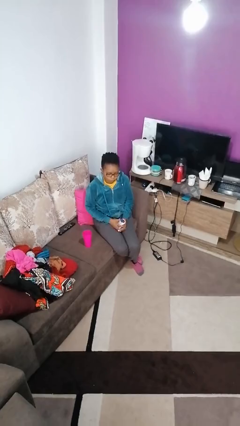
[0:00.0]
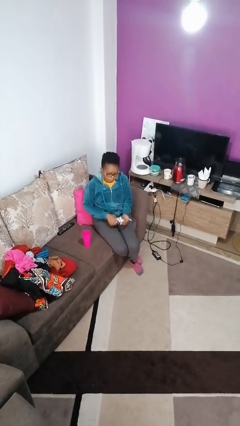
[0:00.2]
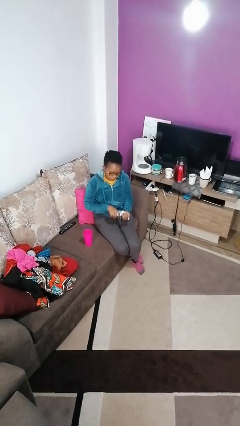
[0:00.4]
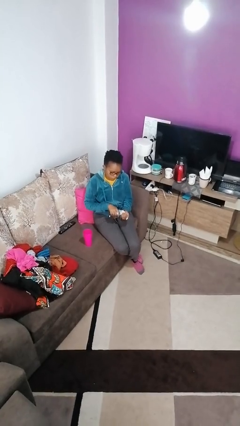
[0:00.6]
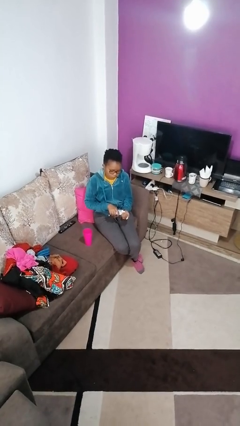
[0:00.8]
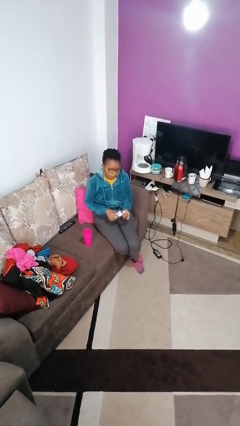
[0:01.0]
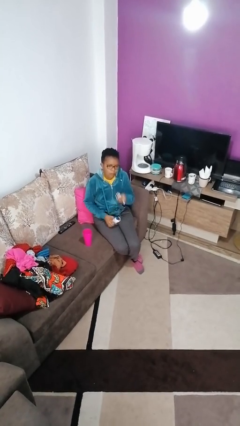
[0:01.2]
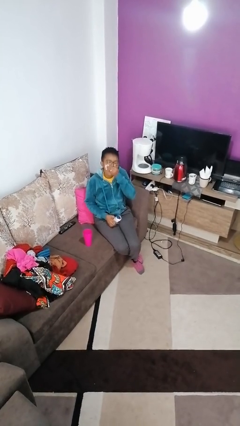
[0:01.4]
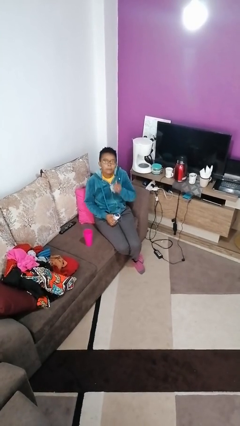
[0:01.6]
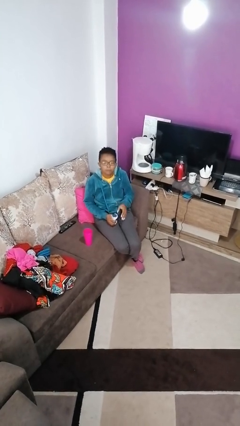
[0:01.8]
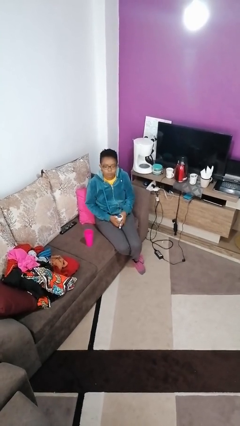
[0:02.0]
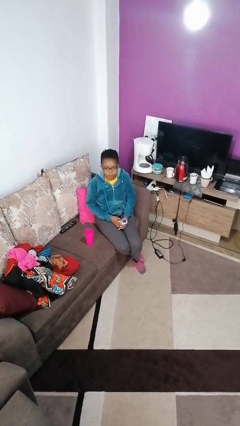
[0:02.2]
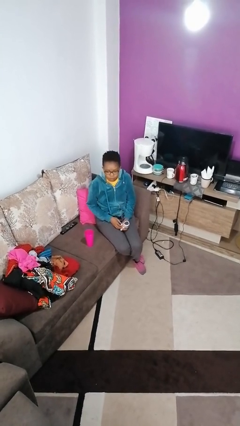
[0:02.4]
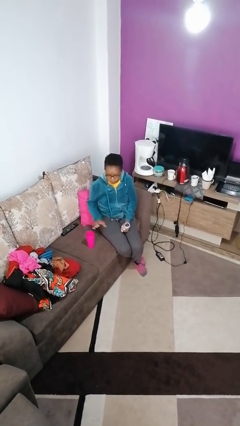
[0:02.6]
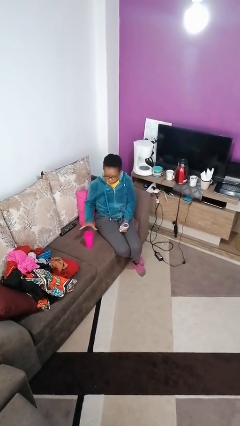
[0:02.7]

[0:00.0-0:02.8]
person takes medicine pills

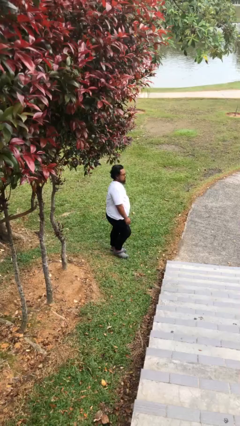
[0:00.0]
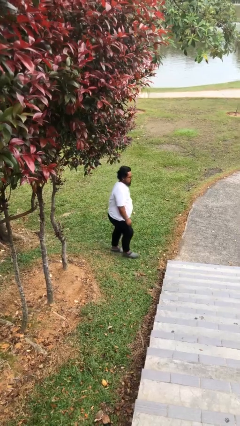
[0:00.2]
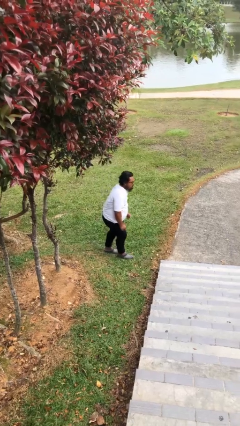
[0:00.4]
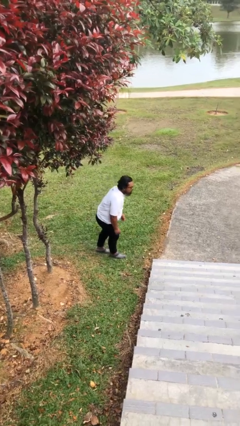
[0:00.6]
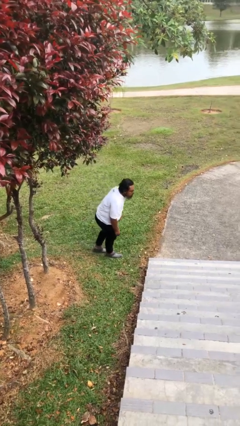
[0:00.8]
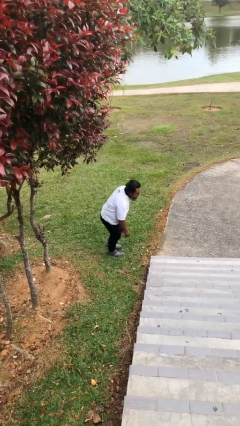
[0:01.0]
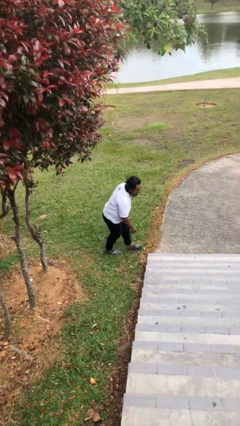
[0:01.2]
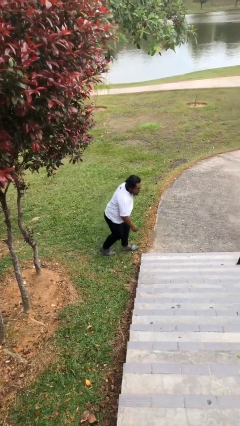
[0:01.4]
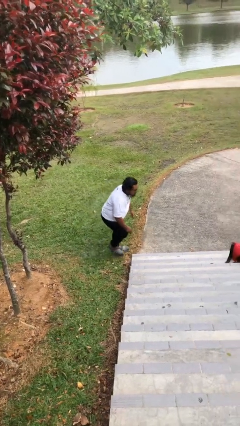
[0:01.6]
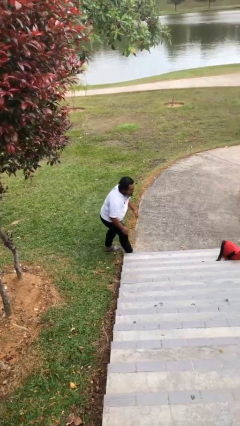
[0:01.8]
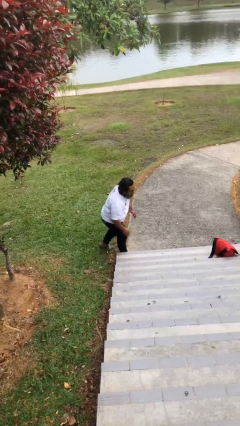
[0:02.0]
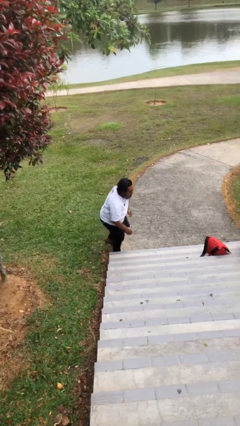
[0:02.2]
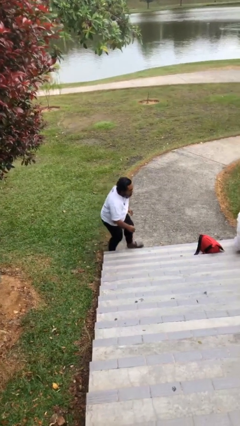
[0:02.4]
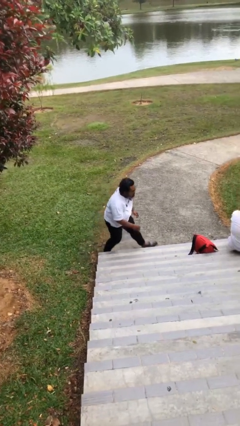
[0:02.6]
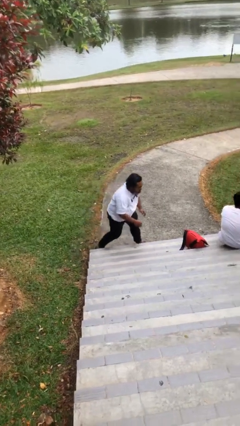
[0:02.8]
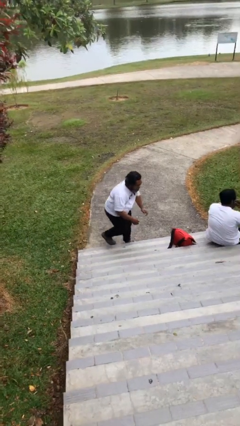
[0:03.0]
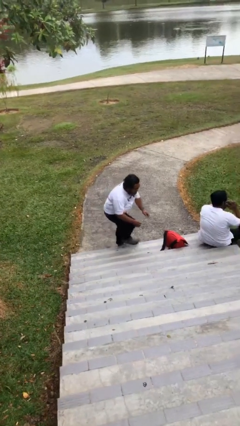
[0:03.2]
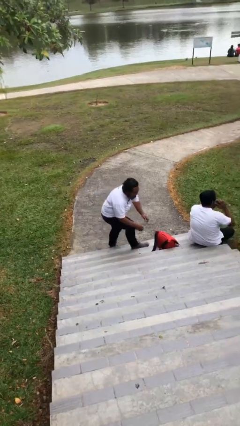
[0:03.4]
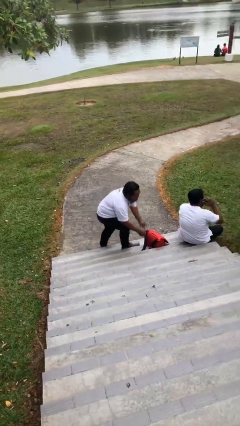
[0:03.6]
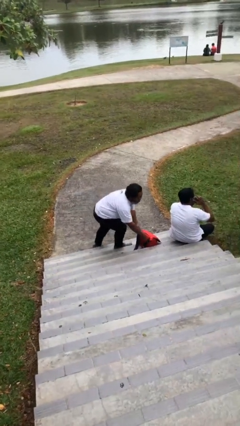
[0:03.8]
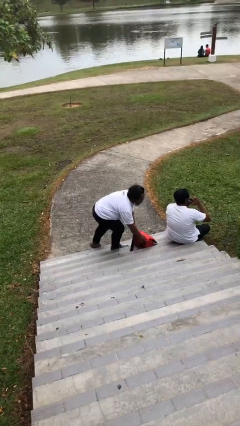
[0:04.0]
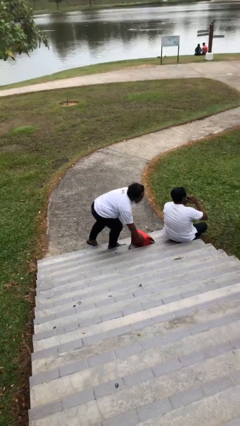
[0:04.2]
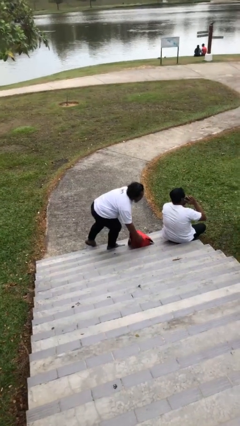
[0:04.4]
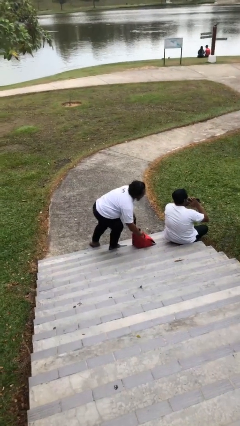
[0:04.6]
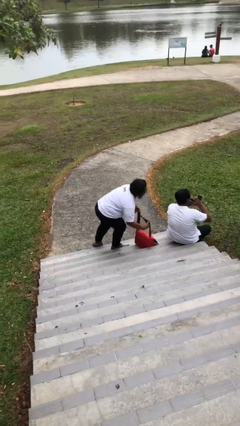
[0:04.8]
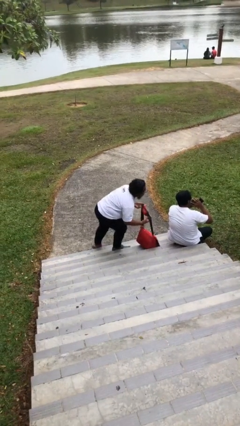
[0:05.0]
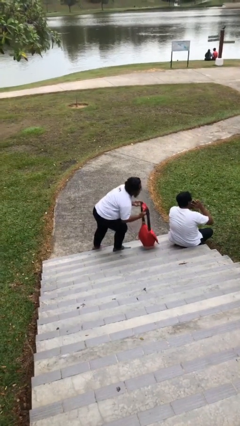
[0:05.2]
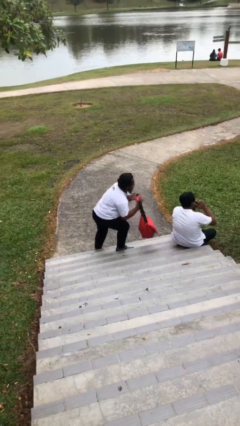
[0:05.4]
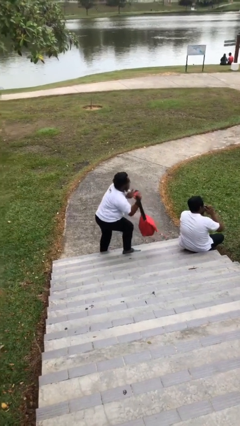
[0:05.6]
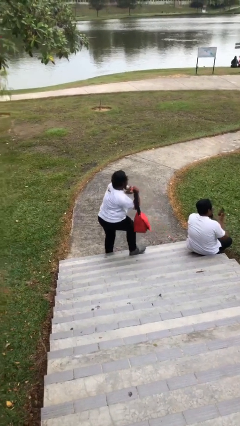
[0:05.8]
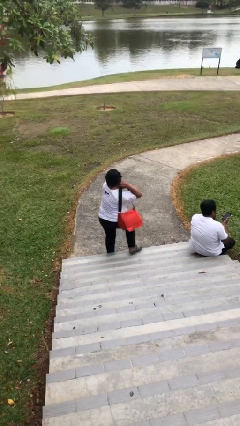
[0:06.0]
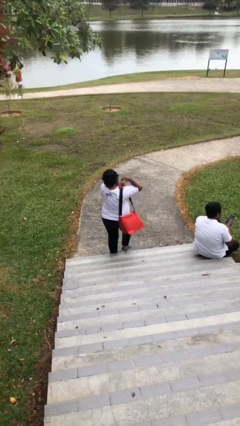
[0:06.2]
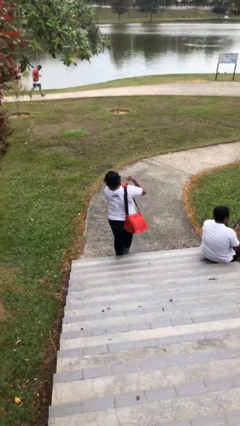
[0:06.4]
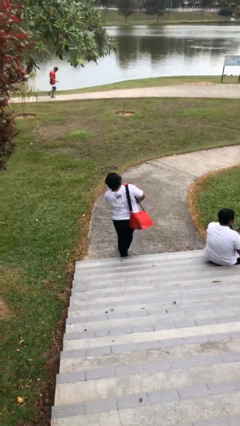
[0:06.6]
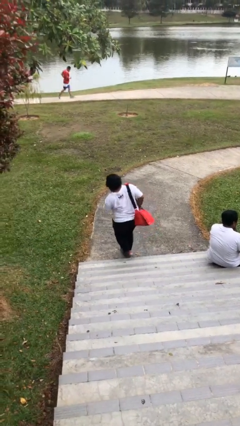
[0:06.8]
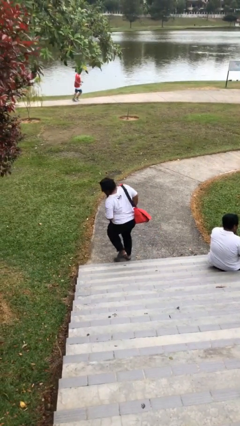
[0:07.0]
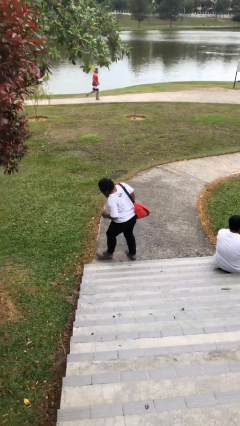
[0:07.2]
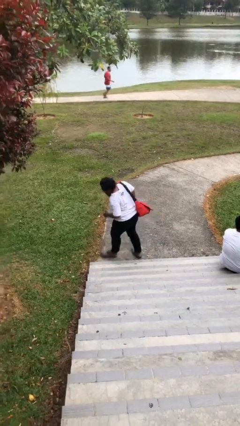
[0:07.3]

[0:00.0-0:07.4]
person steals object from person

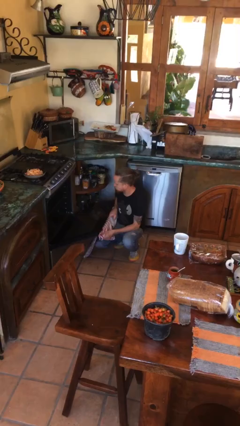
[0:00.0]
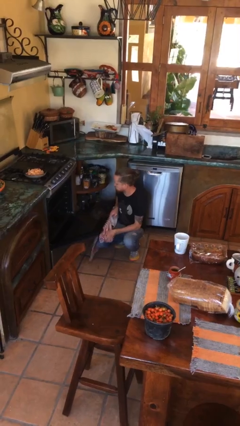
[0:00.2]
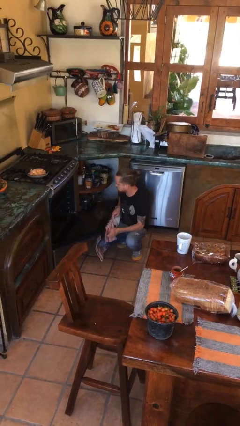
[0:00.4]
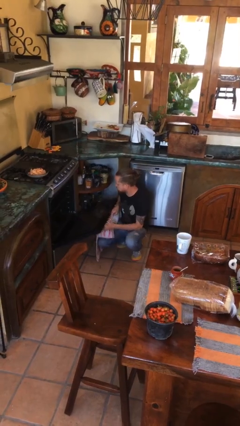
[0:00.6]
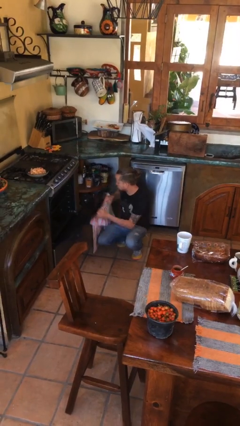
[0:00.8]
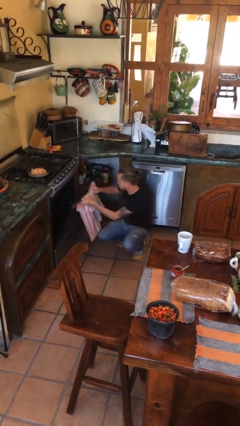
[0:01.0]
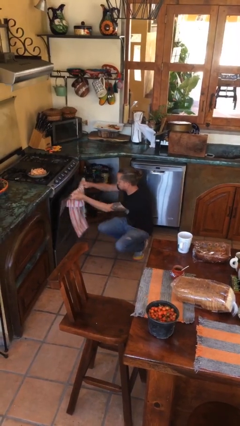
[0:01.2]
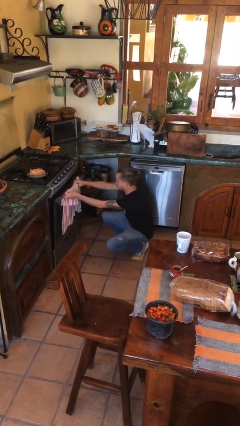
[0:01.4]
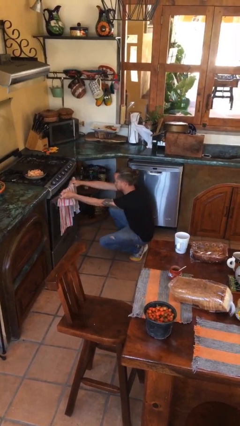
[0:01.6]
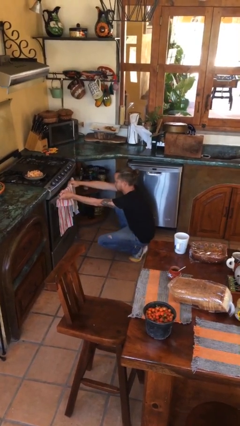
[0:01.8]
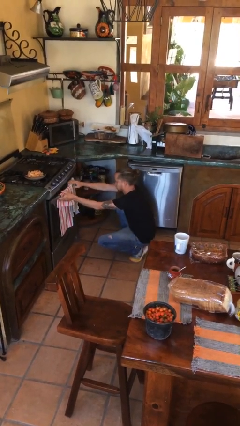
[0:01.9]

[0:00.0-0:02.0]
person closes oven door

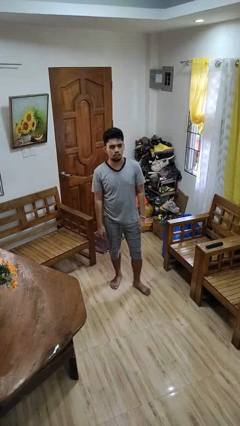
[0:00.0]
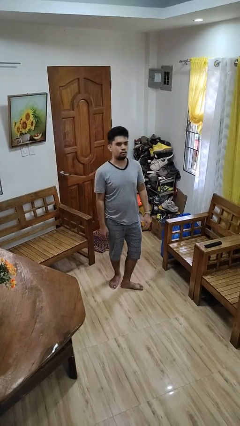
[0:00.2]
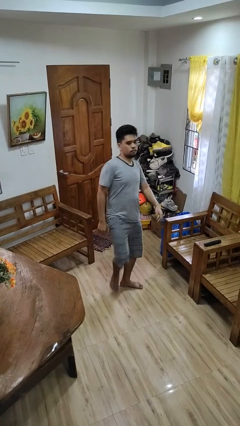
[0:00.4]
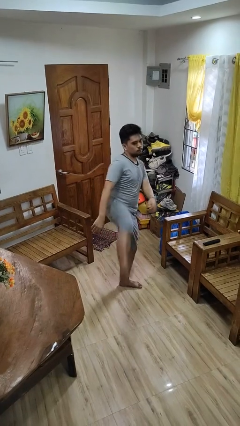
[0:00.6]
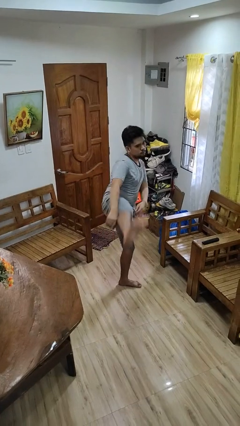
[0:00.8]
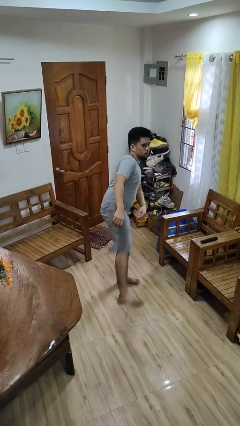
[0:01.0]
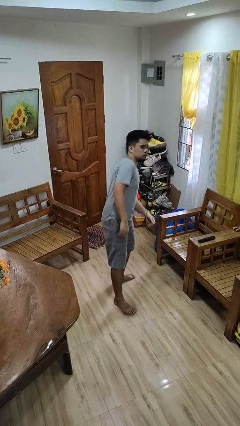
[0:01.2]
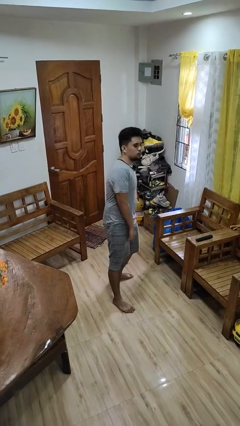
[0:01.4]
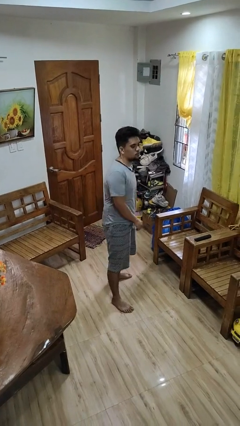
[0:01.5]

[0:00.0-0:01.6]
person karate kicks

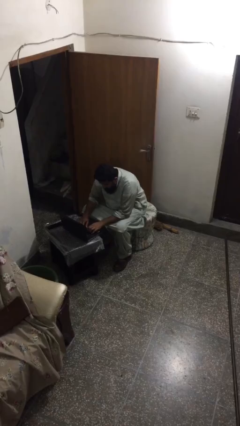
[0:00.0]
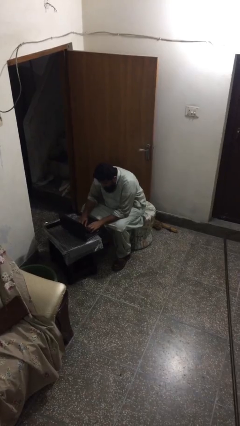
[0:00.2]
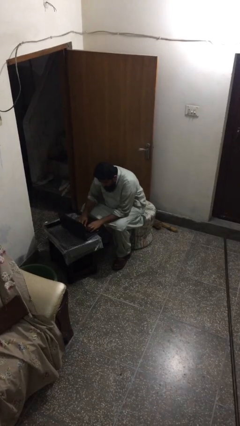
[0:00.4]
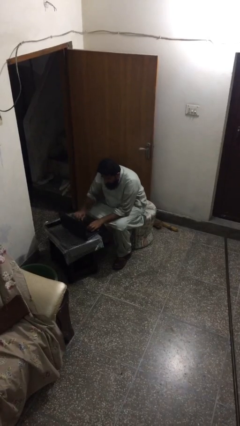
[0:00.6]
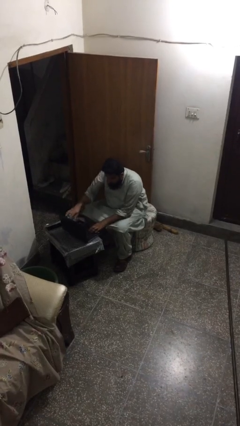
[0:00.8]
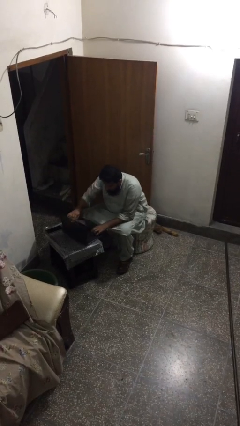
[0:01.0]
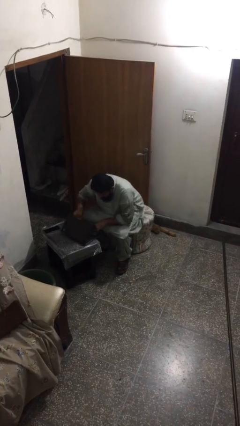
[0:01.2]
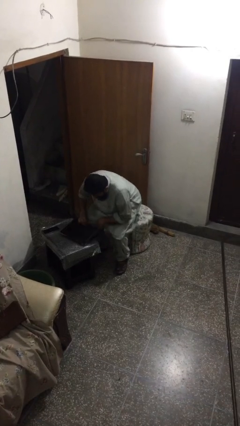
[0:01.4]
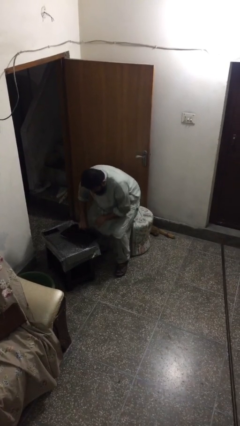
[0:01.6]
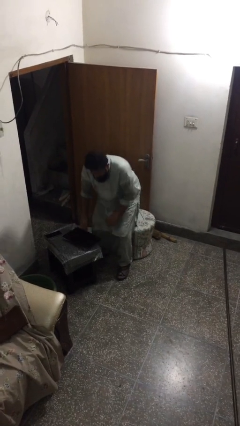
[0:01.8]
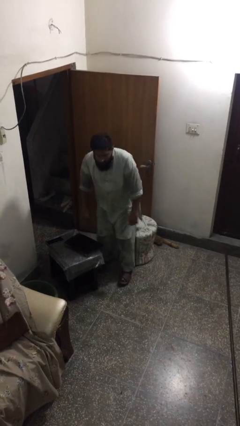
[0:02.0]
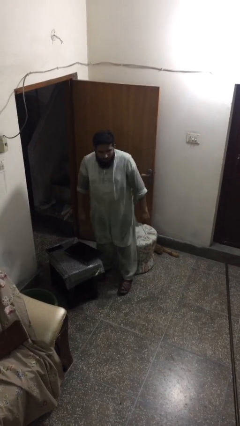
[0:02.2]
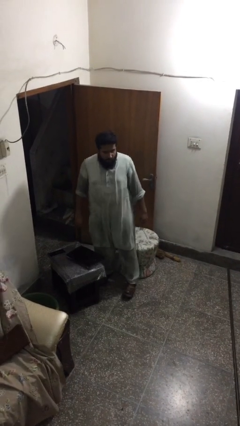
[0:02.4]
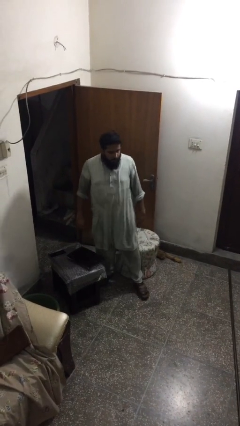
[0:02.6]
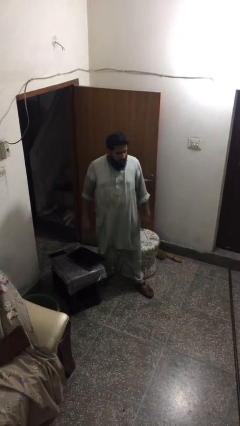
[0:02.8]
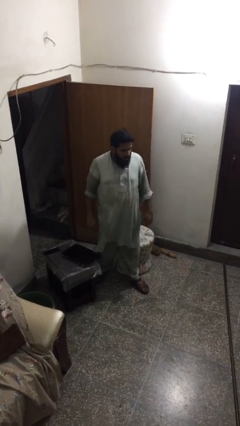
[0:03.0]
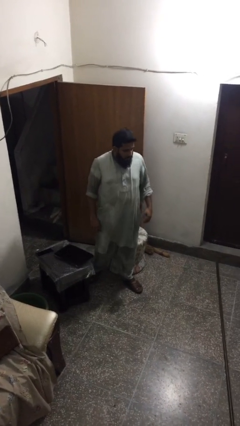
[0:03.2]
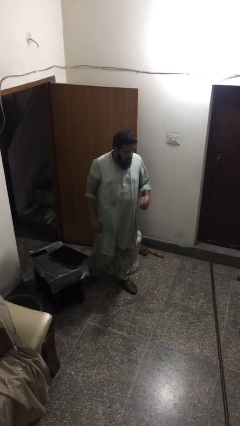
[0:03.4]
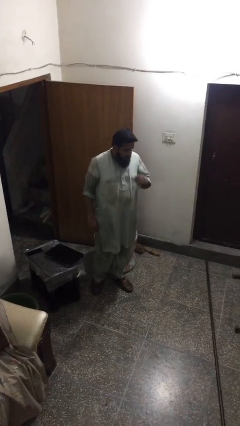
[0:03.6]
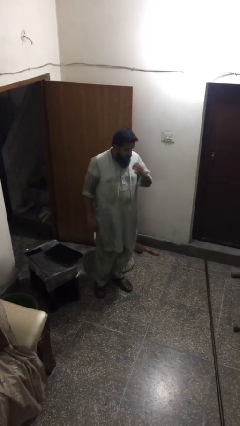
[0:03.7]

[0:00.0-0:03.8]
person stands up
